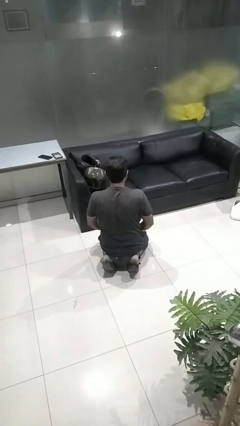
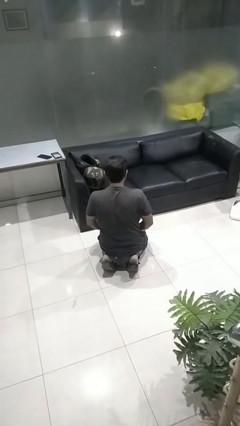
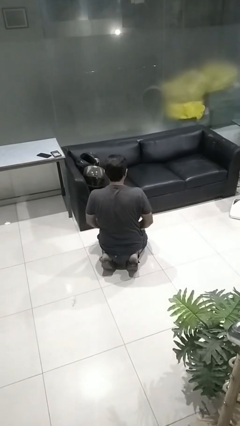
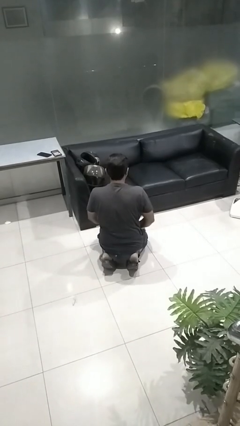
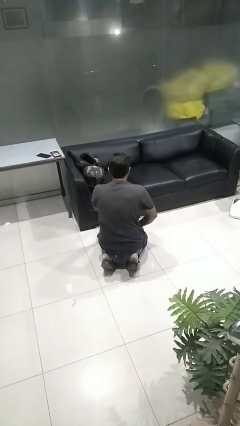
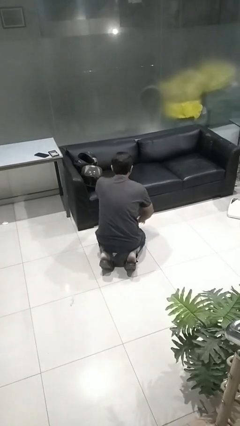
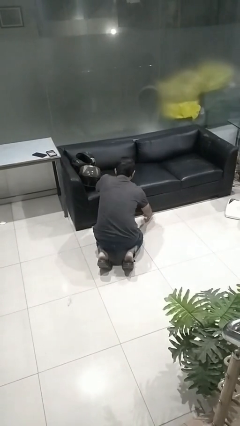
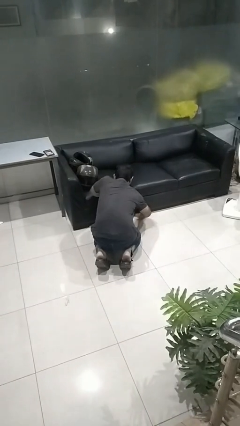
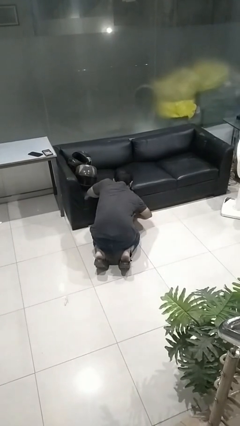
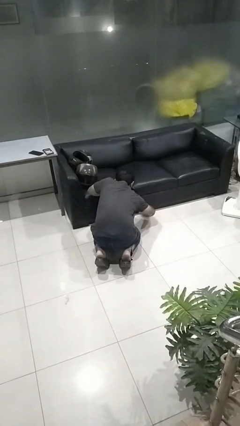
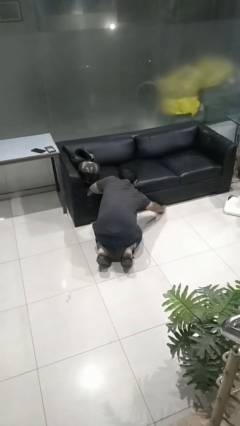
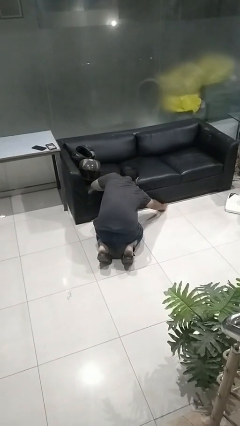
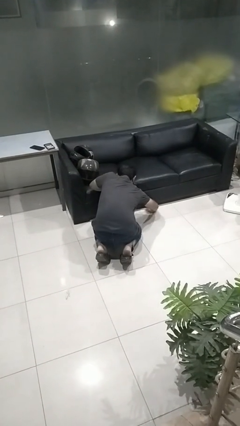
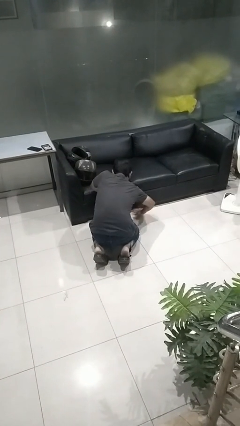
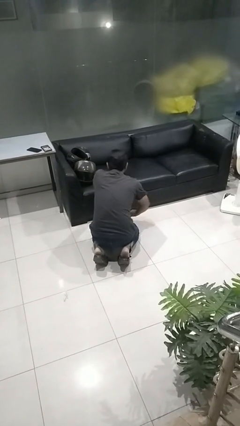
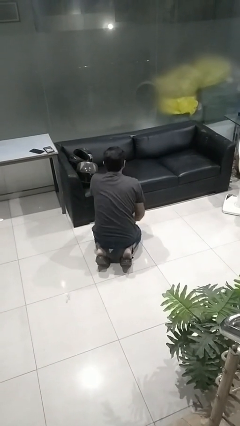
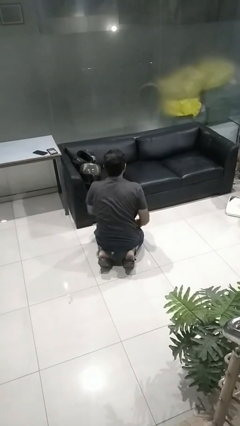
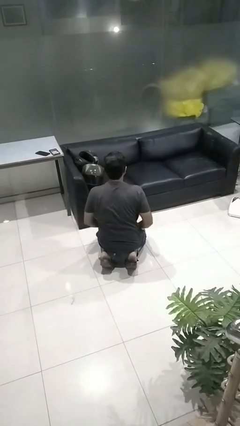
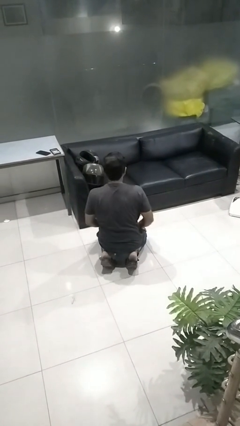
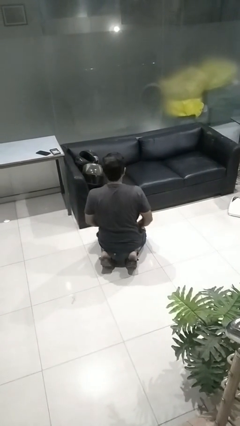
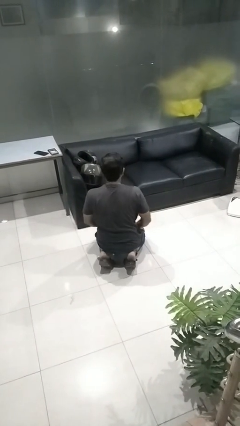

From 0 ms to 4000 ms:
person searches under couch

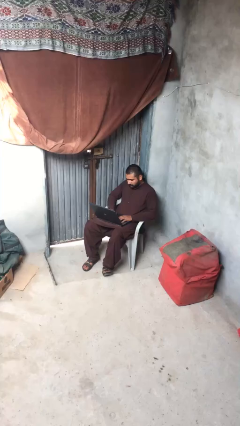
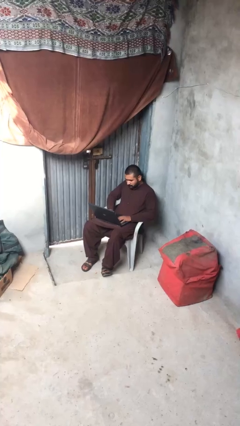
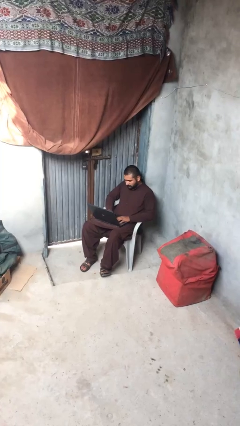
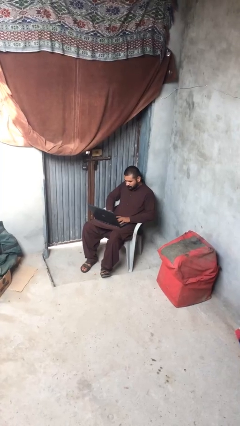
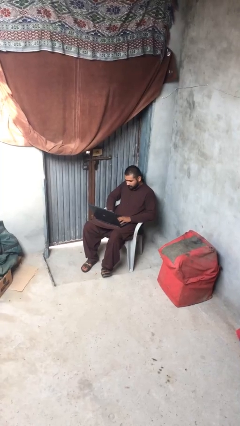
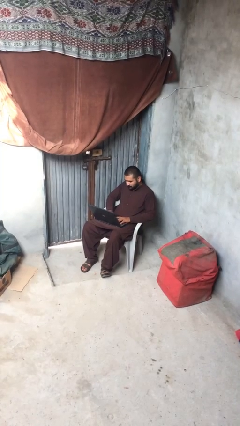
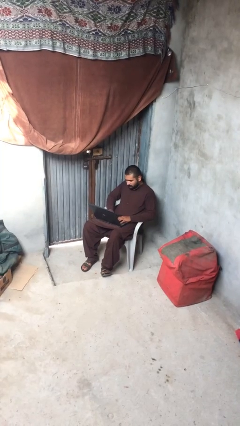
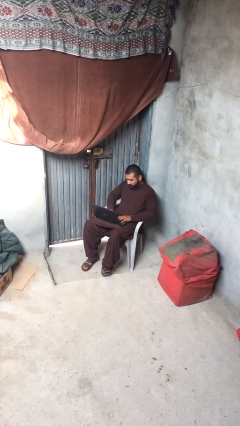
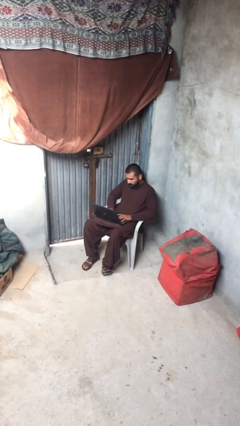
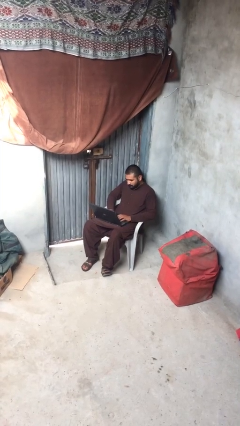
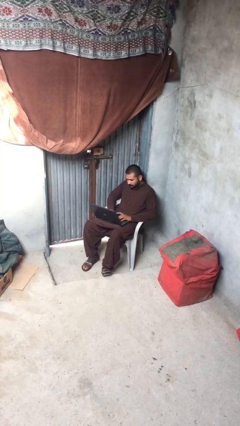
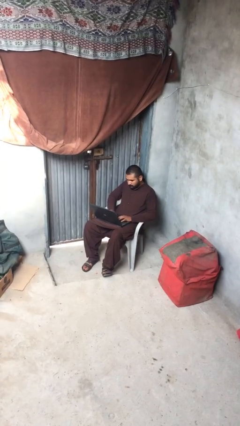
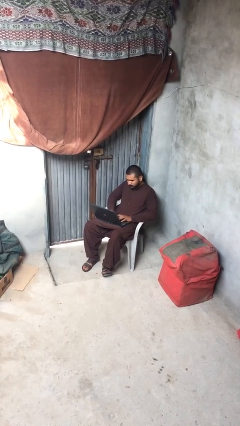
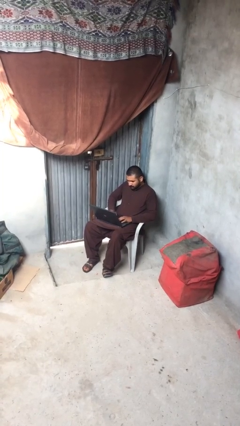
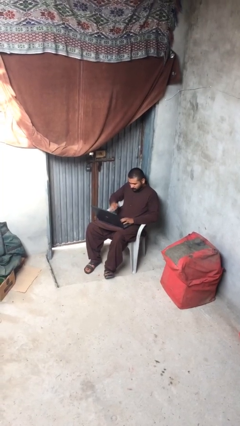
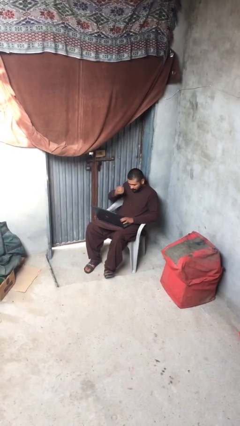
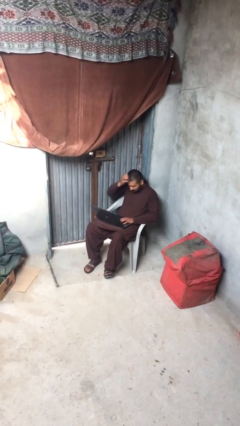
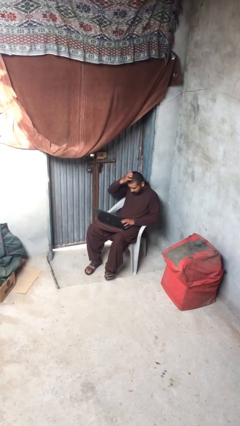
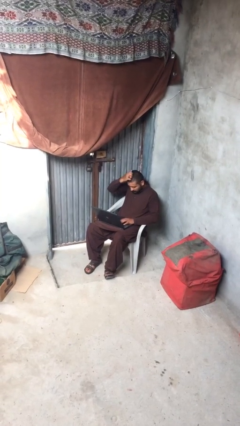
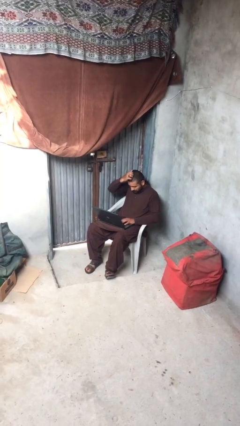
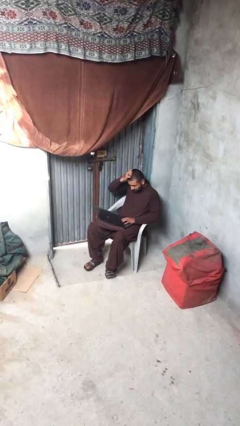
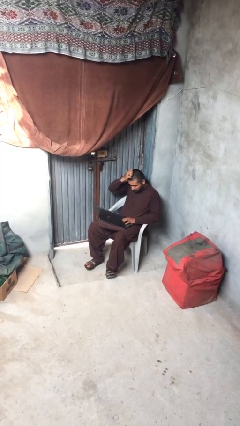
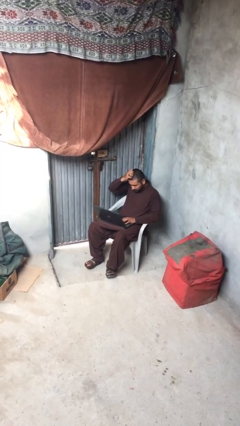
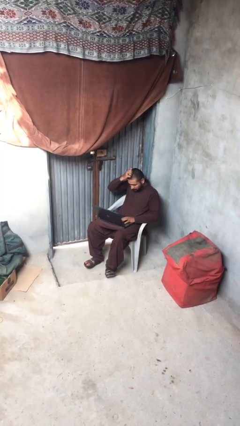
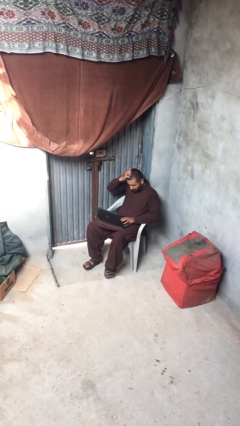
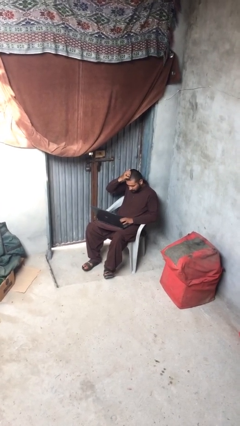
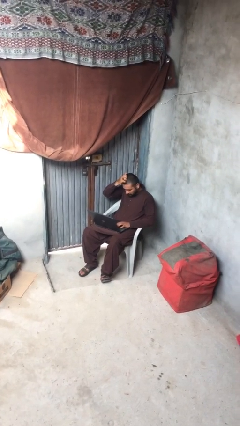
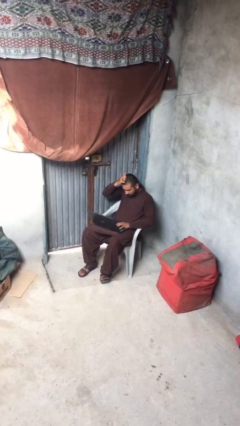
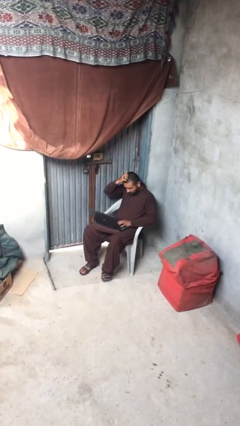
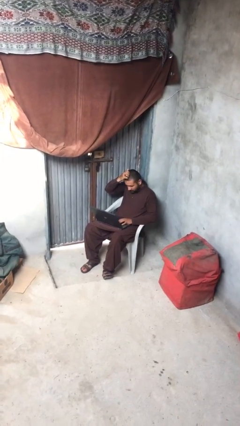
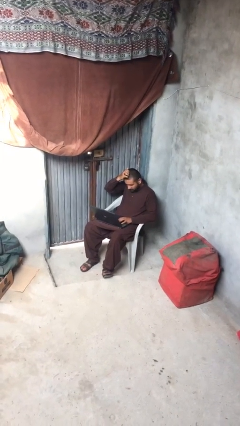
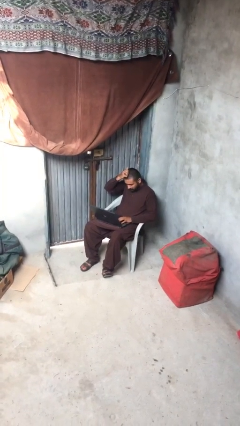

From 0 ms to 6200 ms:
person interacts with laptop

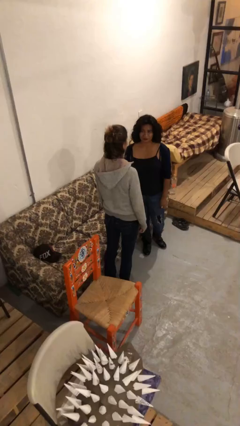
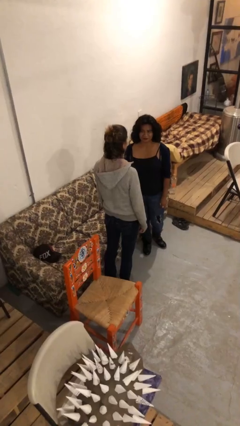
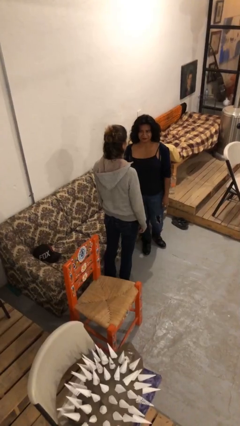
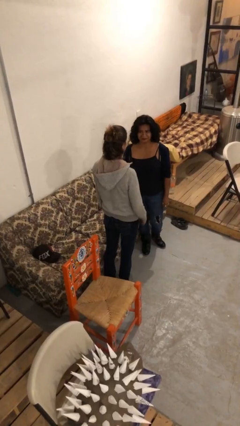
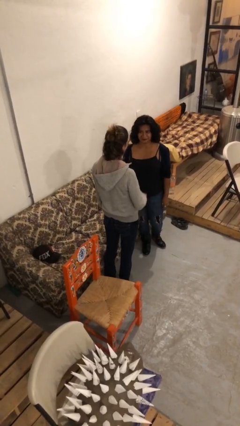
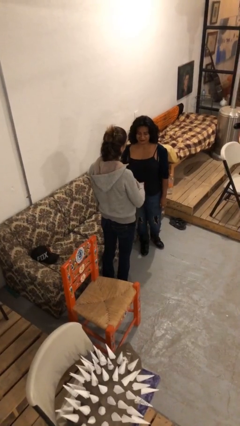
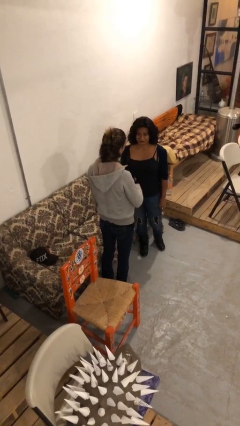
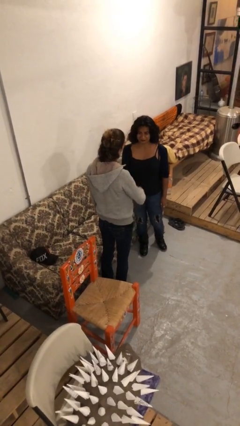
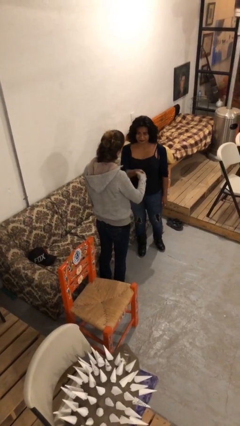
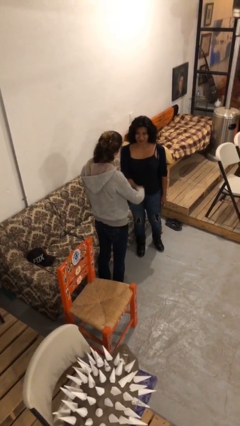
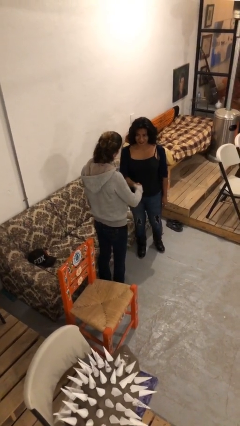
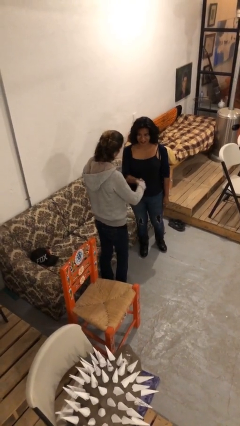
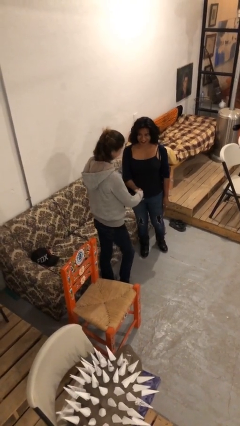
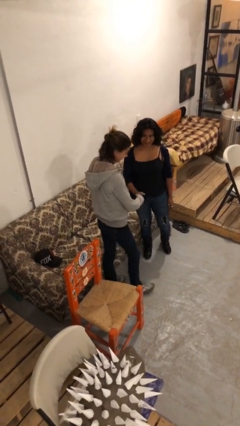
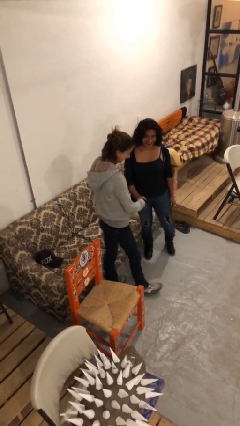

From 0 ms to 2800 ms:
person shakes hand

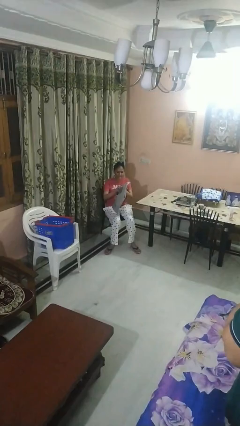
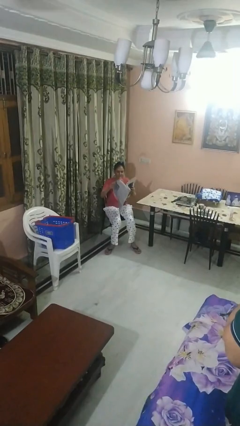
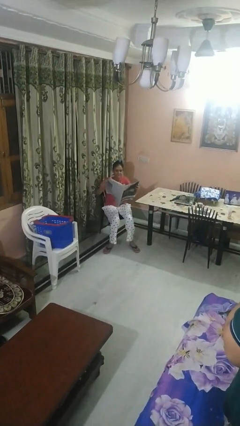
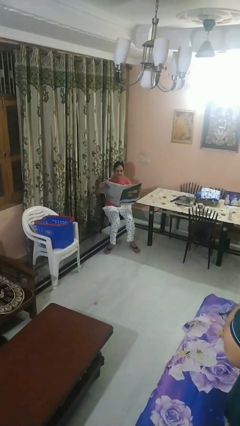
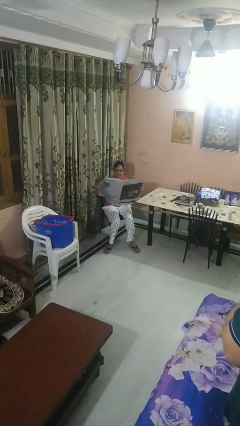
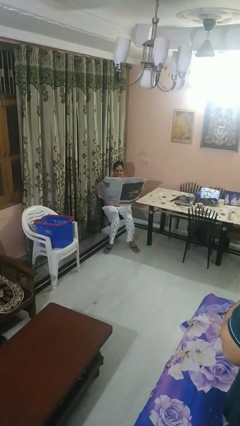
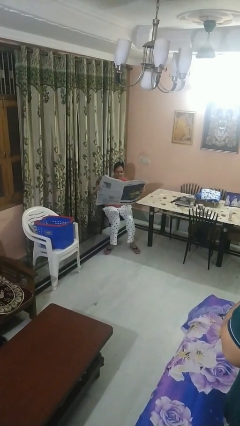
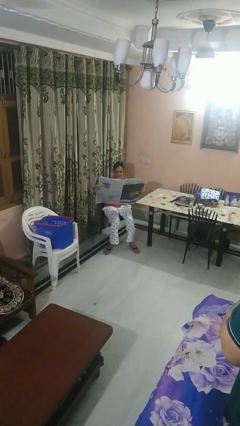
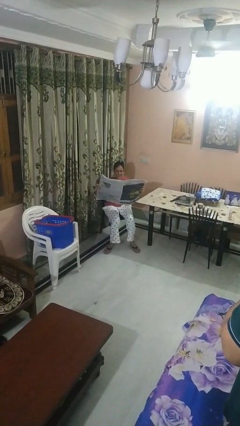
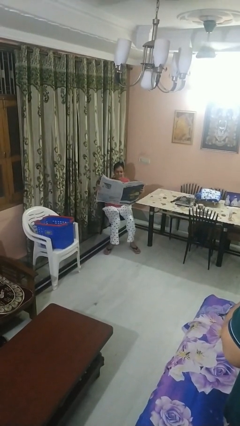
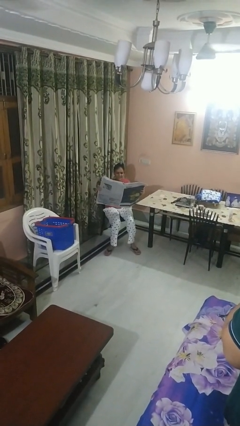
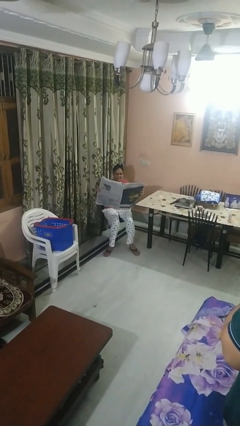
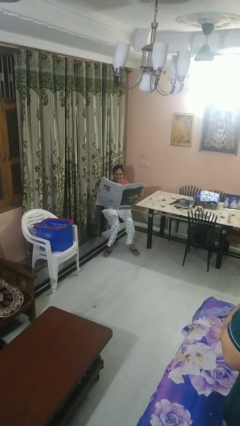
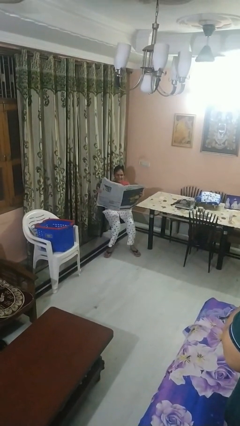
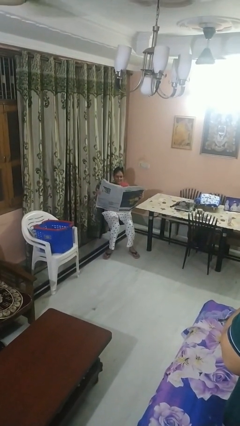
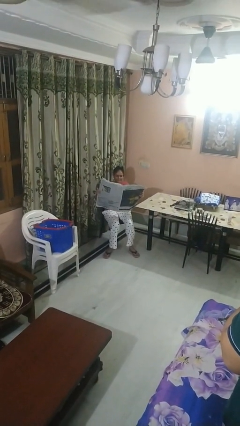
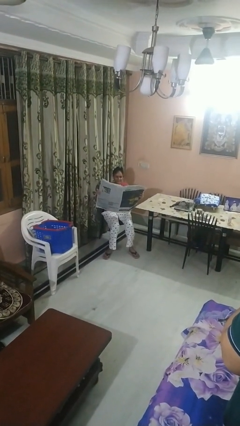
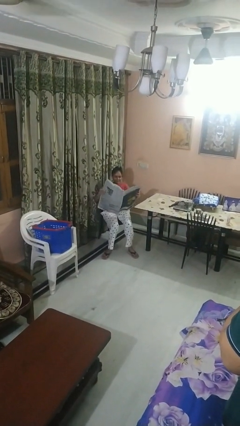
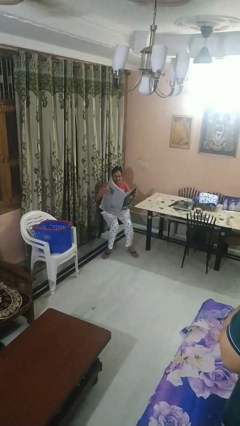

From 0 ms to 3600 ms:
person reads newspaper

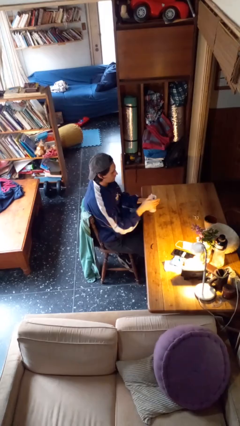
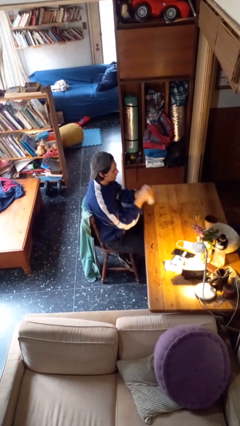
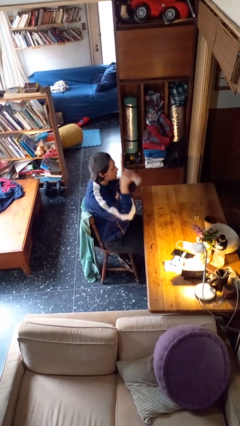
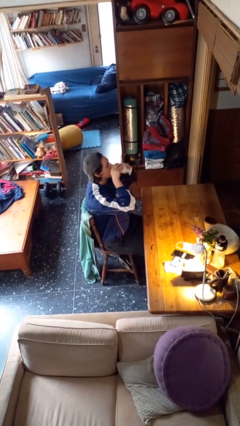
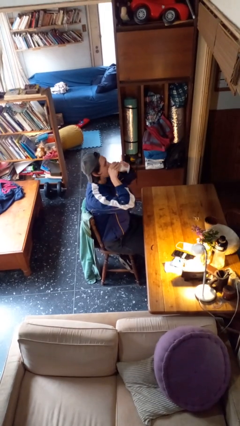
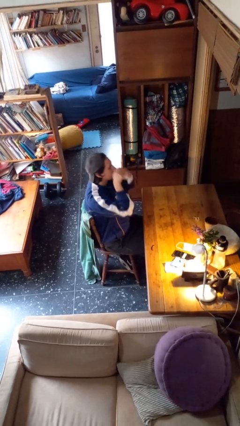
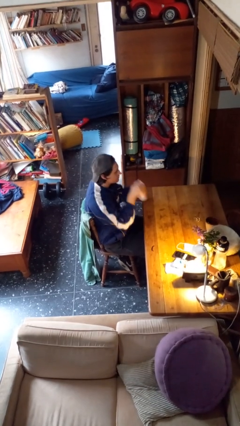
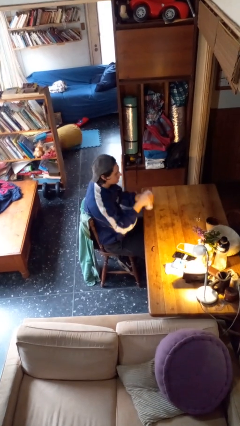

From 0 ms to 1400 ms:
person drinks from mug
